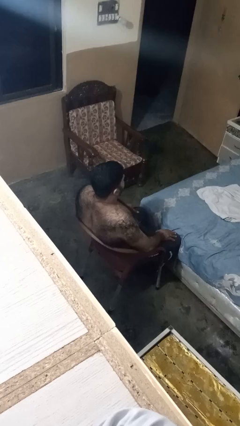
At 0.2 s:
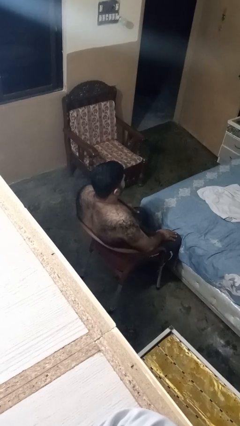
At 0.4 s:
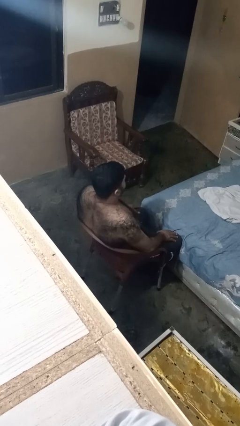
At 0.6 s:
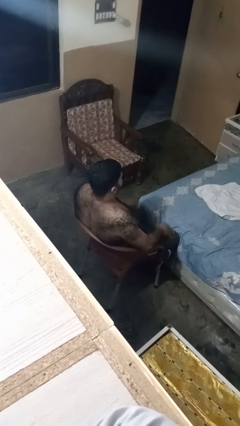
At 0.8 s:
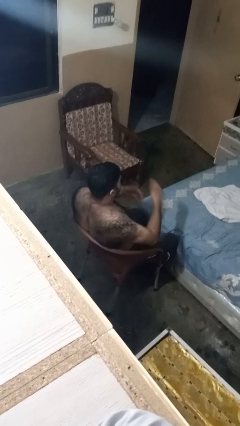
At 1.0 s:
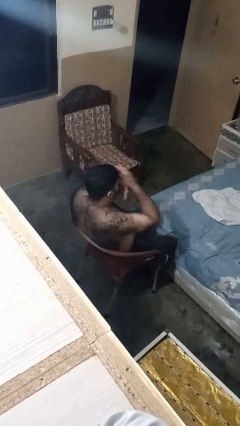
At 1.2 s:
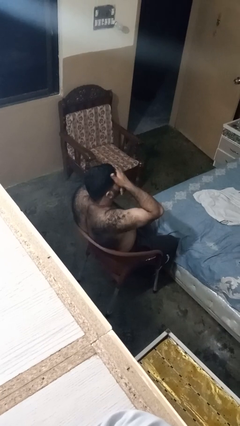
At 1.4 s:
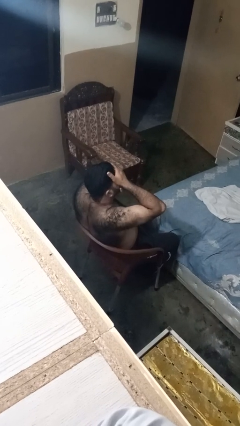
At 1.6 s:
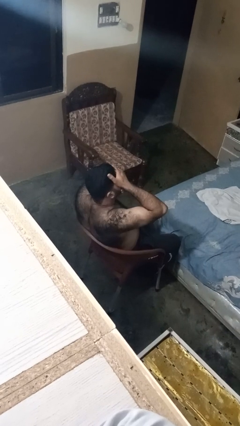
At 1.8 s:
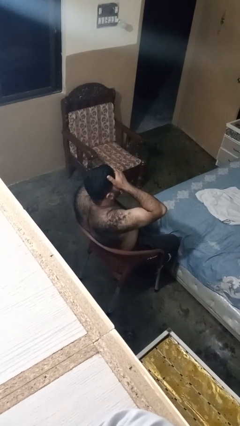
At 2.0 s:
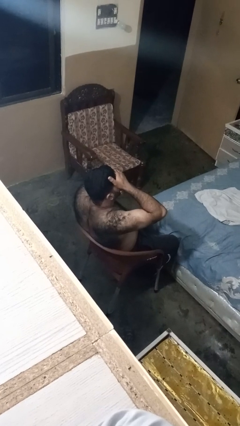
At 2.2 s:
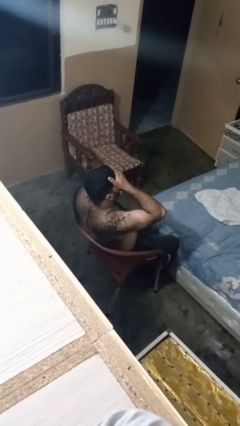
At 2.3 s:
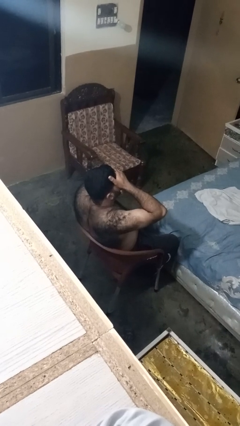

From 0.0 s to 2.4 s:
person covers face with hands

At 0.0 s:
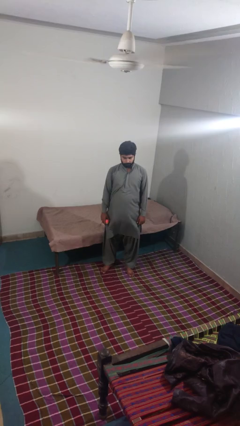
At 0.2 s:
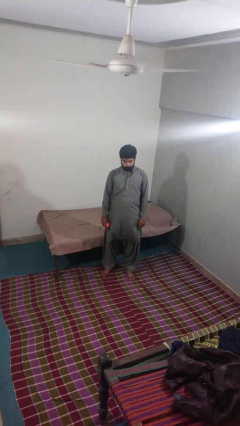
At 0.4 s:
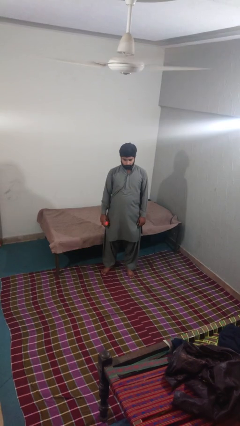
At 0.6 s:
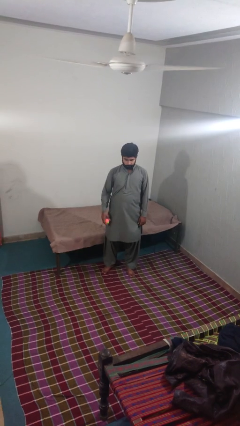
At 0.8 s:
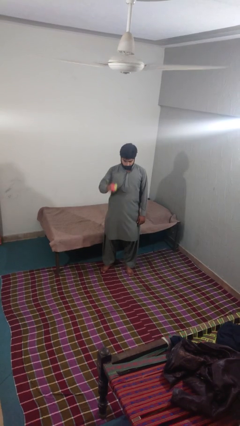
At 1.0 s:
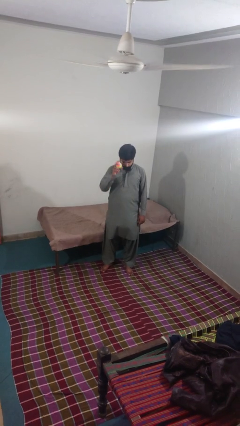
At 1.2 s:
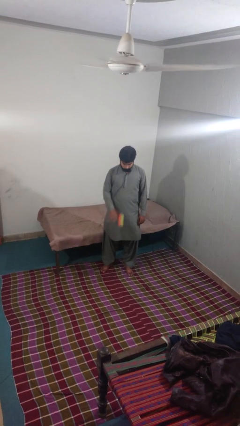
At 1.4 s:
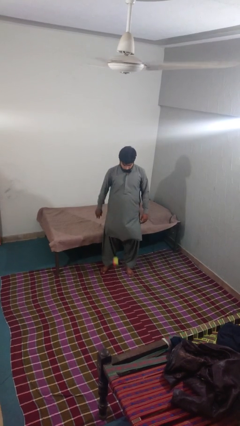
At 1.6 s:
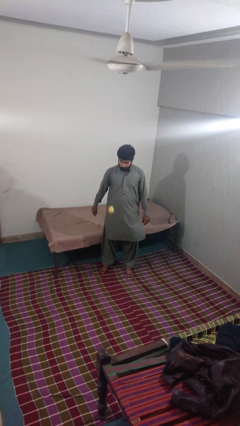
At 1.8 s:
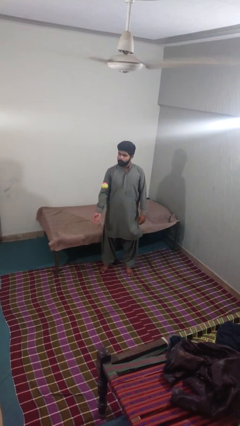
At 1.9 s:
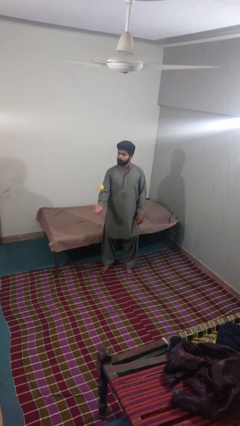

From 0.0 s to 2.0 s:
person bounces ball on floor

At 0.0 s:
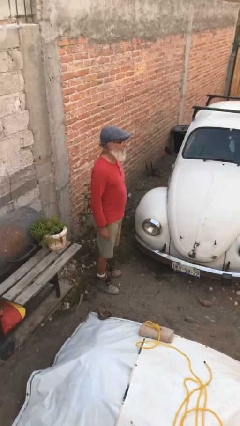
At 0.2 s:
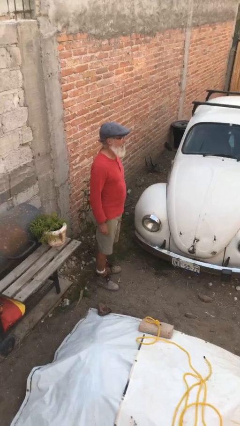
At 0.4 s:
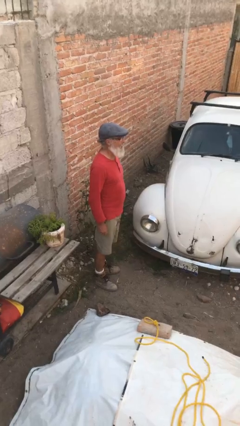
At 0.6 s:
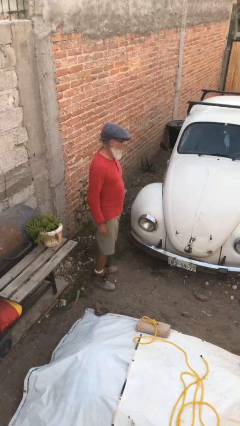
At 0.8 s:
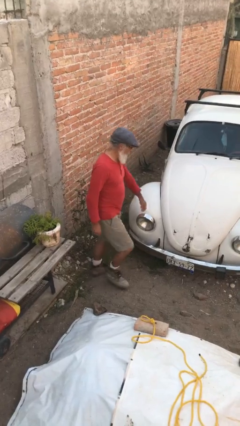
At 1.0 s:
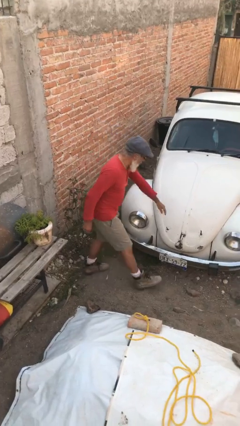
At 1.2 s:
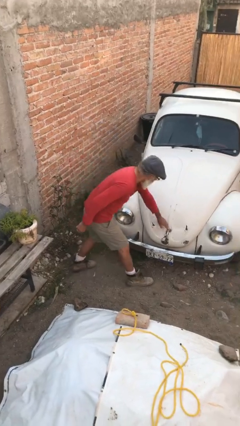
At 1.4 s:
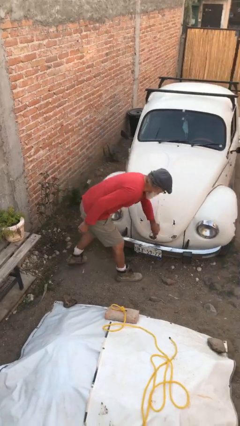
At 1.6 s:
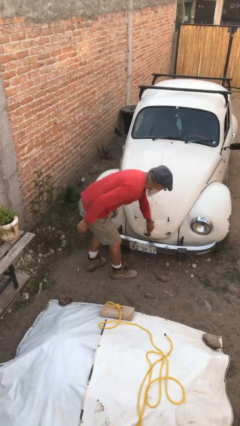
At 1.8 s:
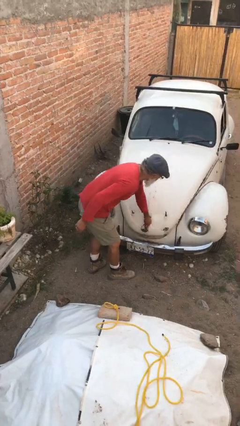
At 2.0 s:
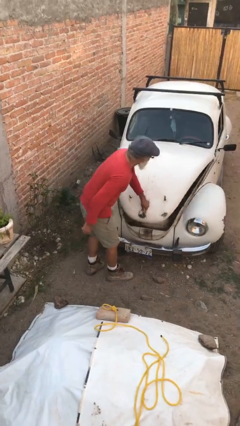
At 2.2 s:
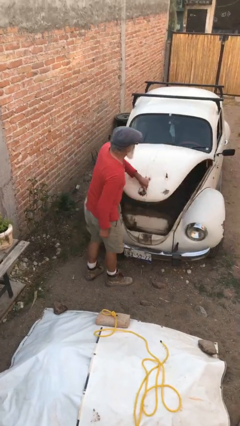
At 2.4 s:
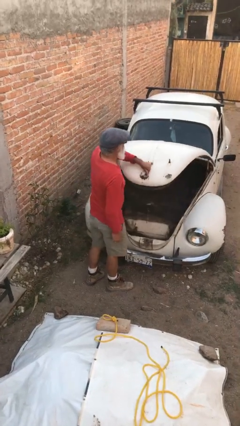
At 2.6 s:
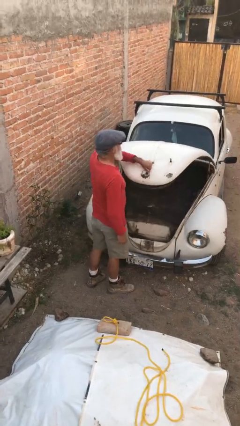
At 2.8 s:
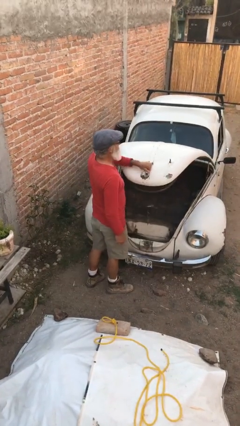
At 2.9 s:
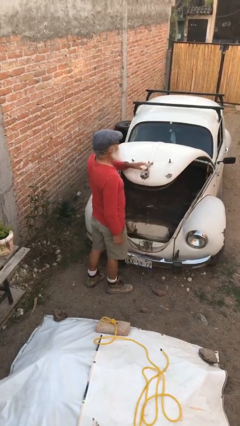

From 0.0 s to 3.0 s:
person opens car trunk

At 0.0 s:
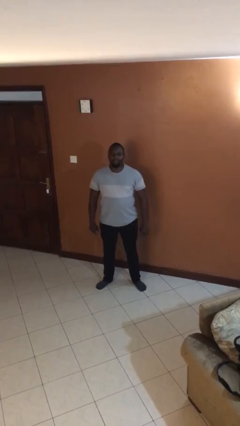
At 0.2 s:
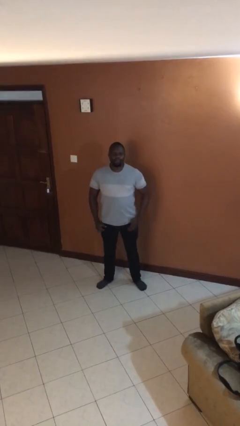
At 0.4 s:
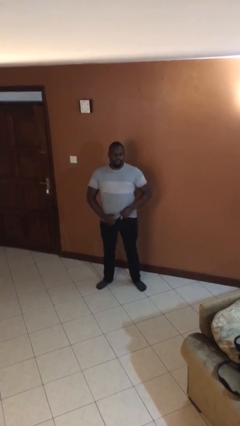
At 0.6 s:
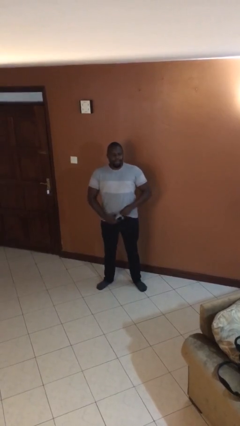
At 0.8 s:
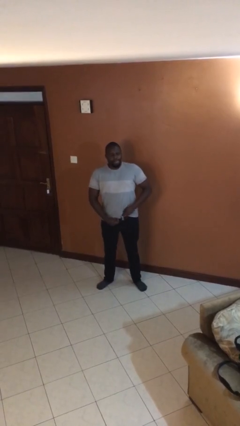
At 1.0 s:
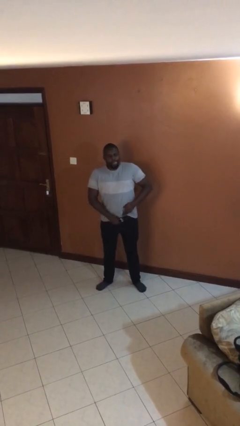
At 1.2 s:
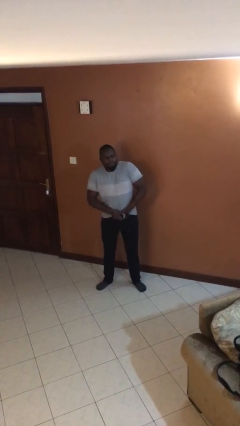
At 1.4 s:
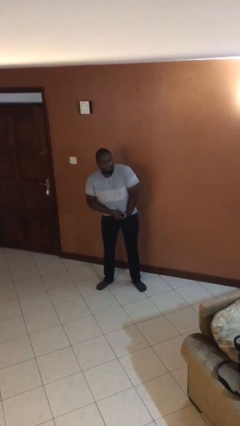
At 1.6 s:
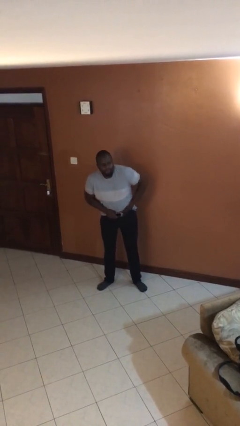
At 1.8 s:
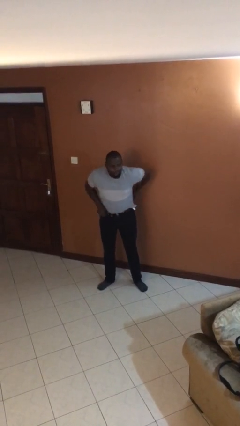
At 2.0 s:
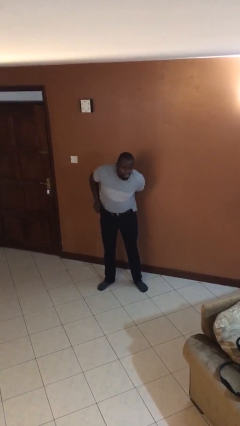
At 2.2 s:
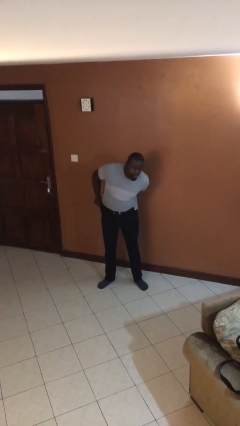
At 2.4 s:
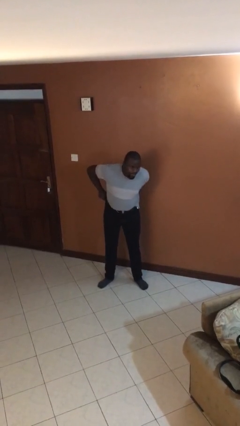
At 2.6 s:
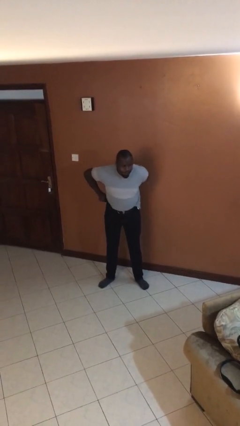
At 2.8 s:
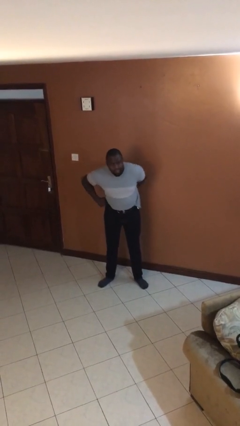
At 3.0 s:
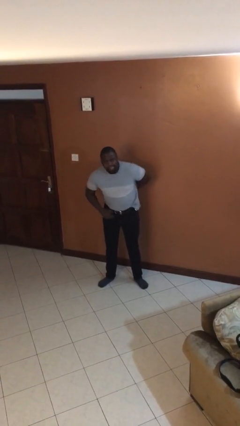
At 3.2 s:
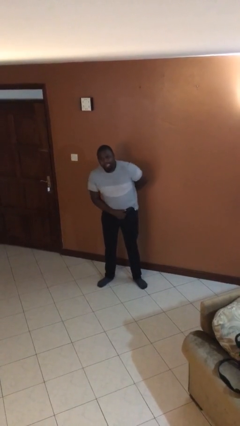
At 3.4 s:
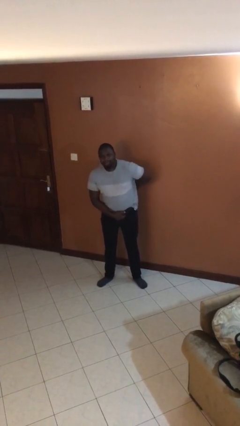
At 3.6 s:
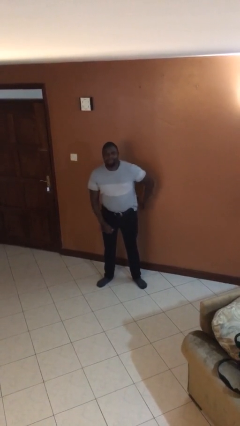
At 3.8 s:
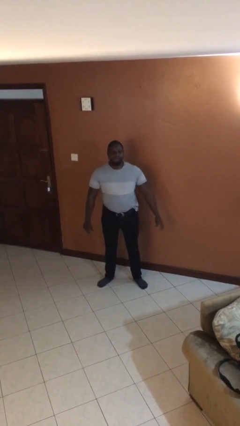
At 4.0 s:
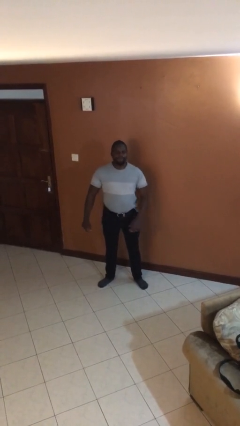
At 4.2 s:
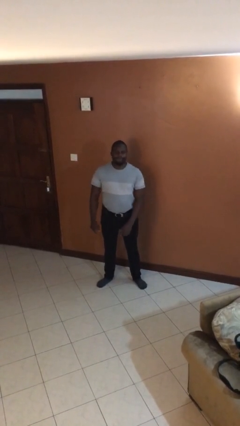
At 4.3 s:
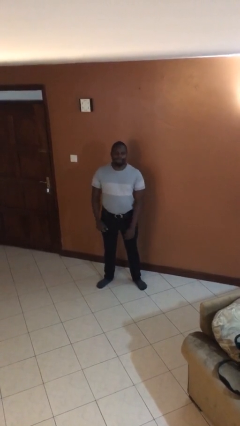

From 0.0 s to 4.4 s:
person tucks in shirt

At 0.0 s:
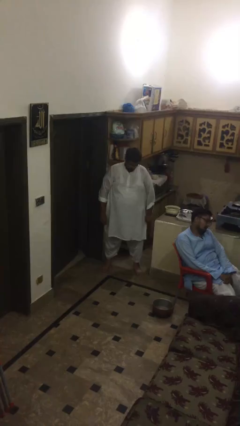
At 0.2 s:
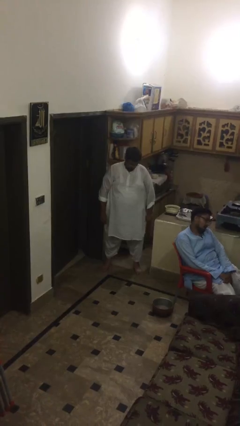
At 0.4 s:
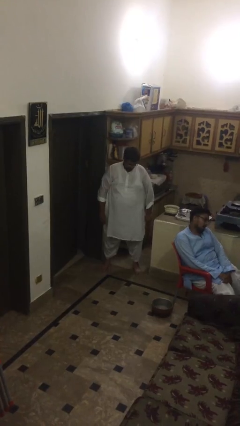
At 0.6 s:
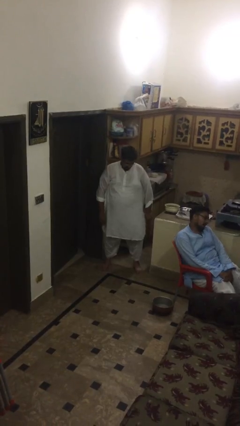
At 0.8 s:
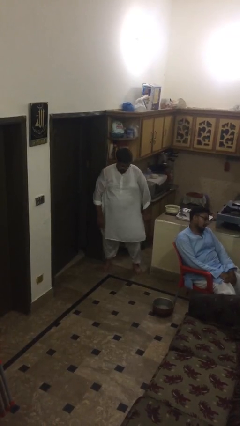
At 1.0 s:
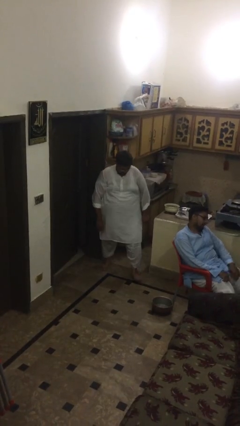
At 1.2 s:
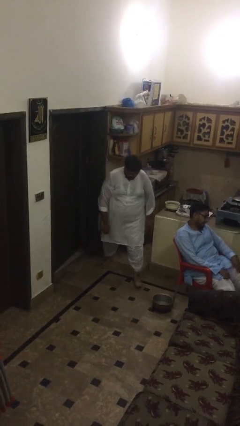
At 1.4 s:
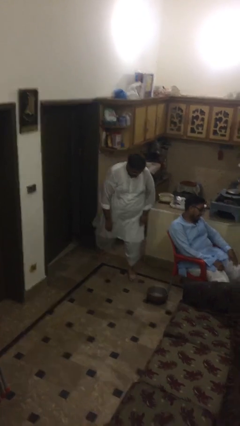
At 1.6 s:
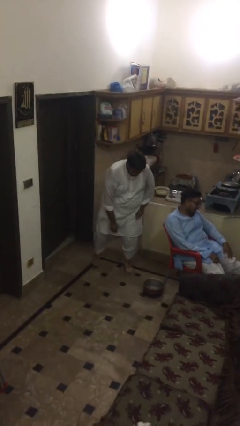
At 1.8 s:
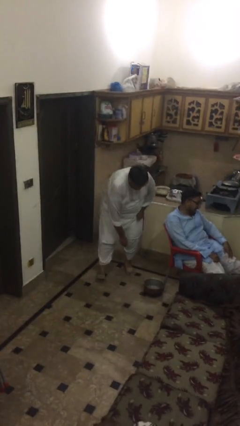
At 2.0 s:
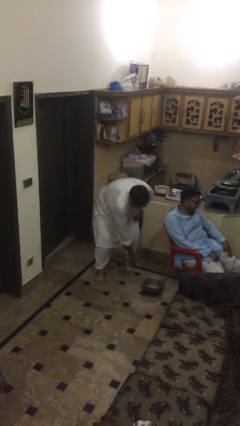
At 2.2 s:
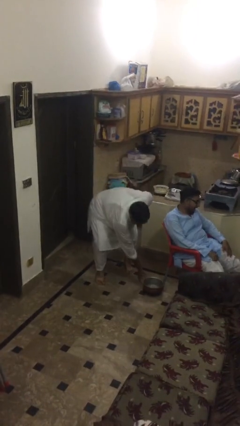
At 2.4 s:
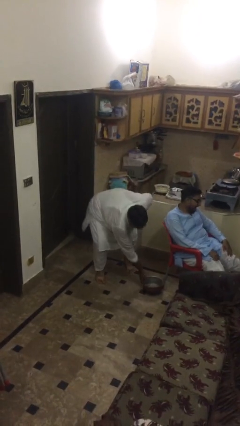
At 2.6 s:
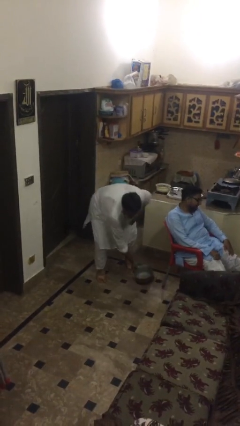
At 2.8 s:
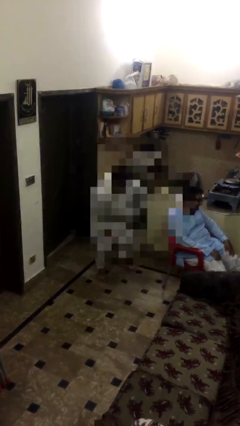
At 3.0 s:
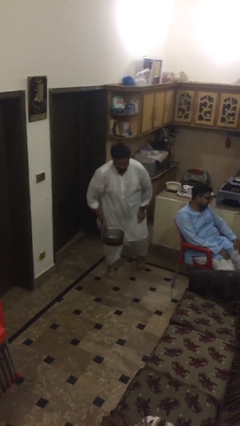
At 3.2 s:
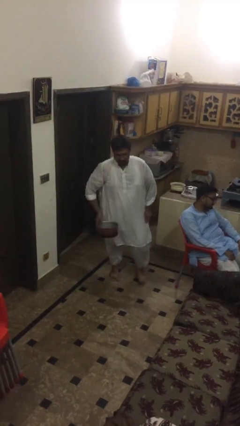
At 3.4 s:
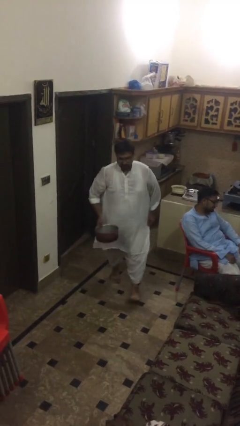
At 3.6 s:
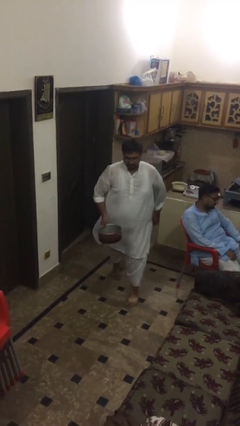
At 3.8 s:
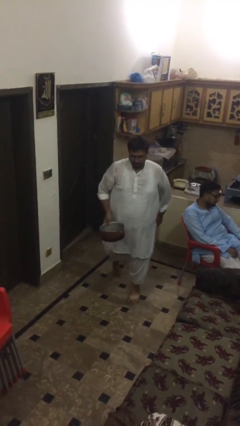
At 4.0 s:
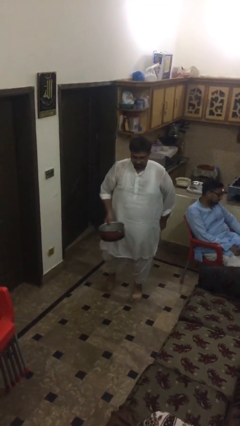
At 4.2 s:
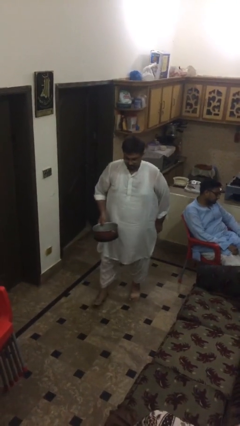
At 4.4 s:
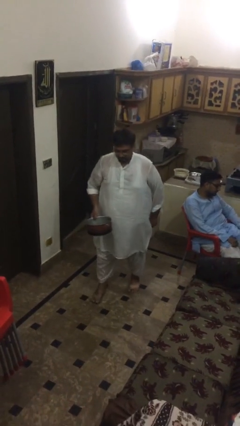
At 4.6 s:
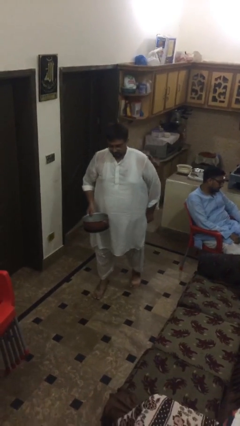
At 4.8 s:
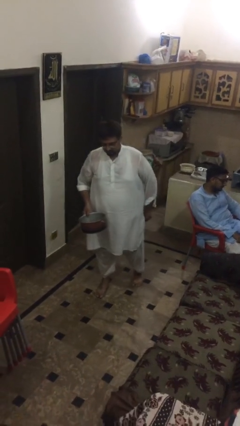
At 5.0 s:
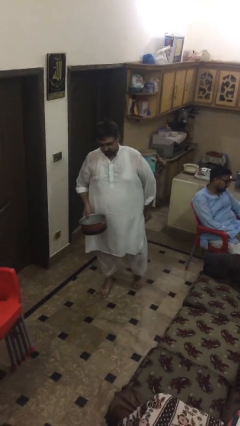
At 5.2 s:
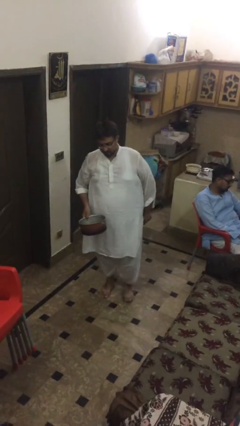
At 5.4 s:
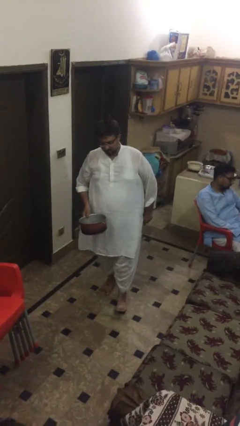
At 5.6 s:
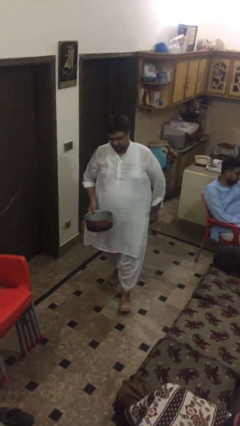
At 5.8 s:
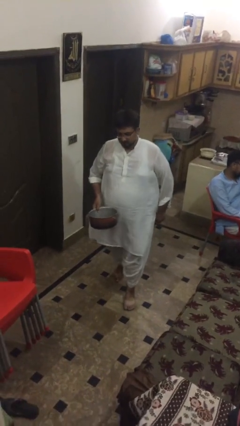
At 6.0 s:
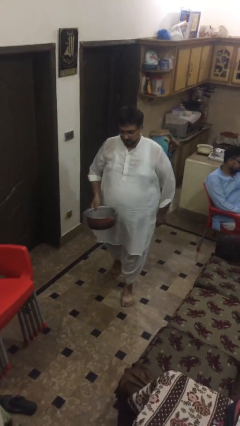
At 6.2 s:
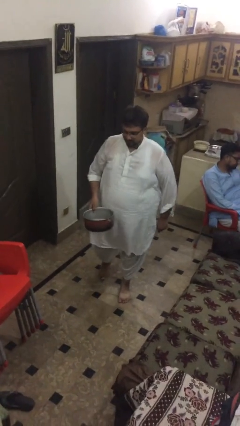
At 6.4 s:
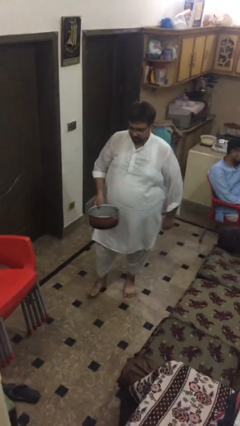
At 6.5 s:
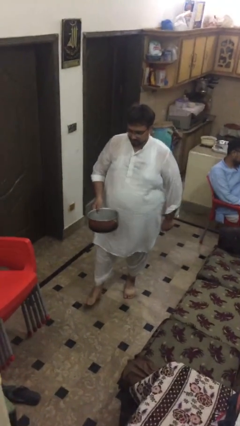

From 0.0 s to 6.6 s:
person steals object from person
